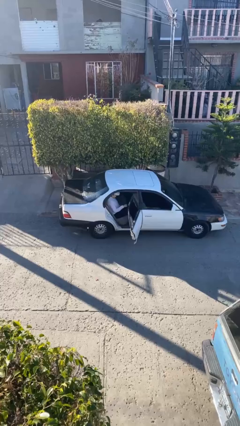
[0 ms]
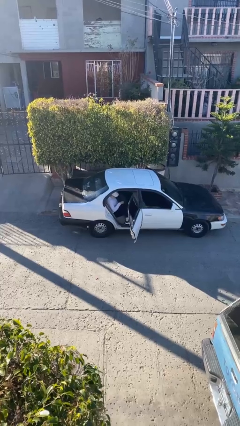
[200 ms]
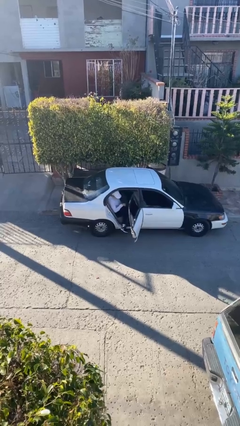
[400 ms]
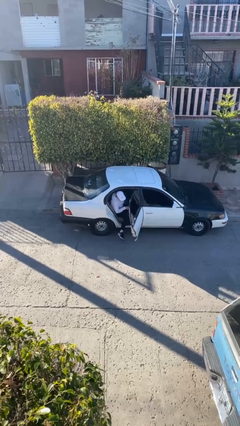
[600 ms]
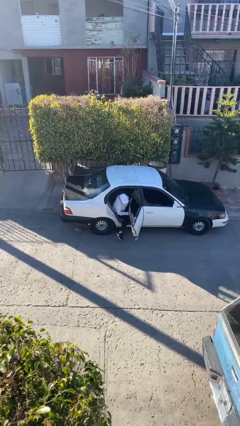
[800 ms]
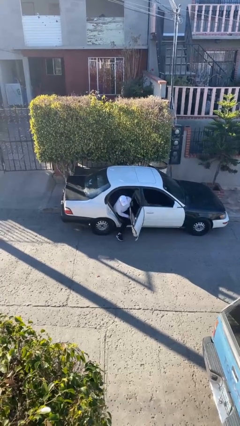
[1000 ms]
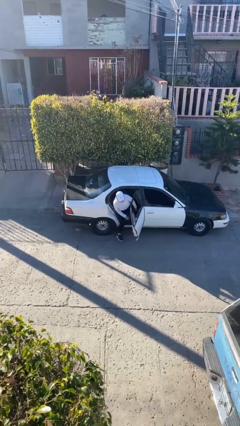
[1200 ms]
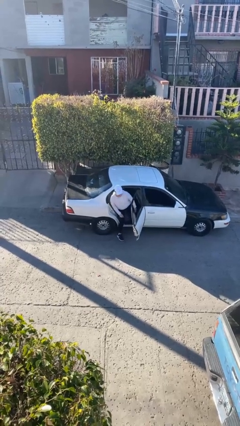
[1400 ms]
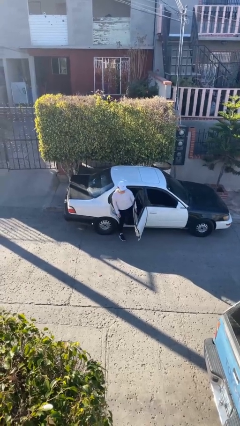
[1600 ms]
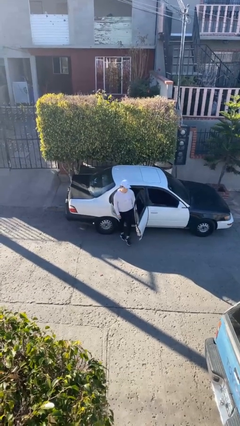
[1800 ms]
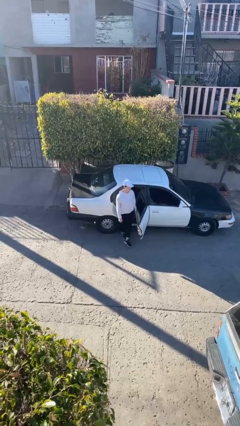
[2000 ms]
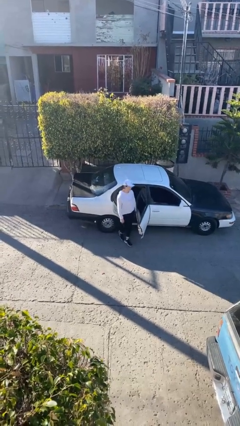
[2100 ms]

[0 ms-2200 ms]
person exits car

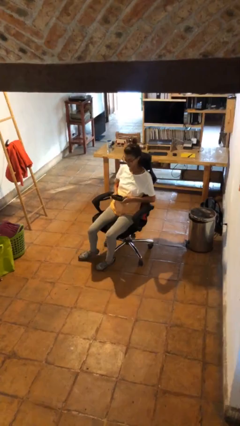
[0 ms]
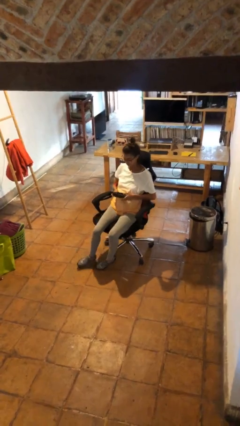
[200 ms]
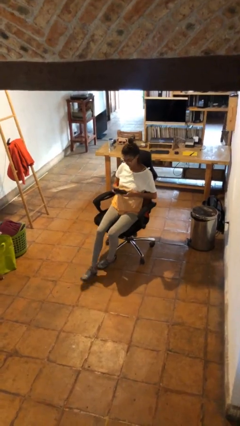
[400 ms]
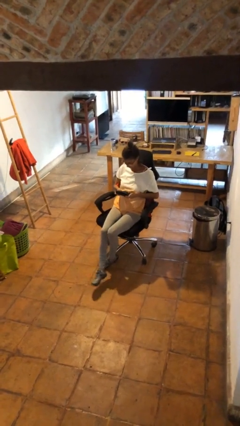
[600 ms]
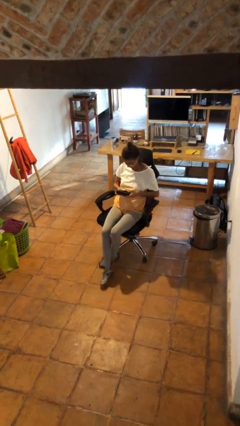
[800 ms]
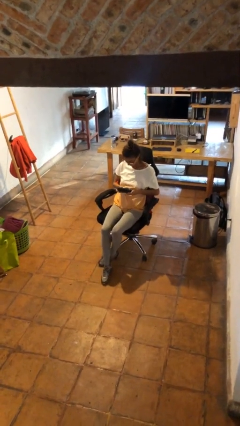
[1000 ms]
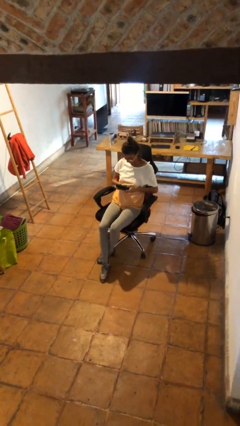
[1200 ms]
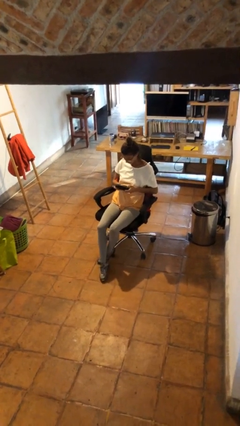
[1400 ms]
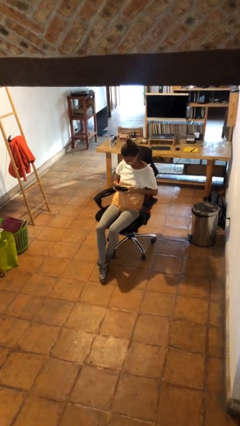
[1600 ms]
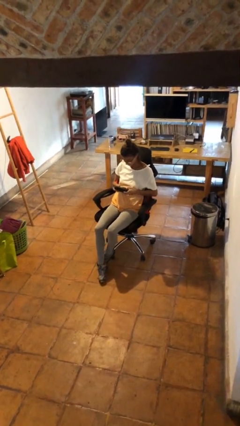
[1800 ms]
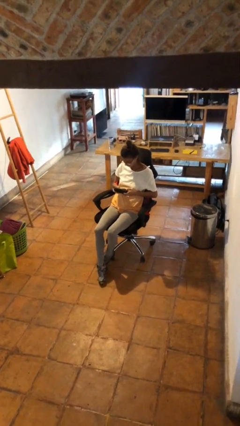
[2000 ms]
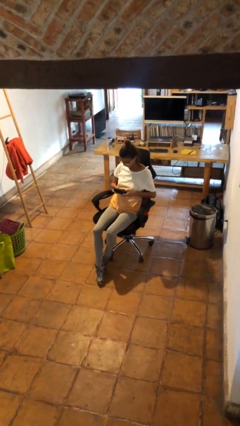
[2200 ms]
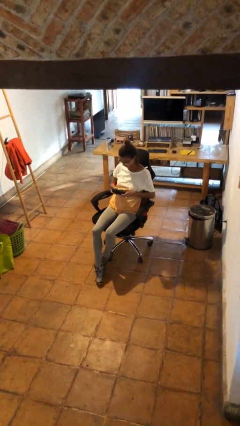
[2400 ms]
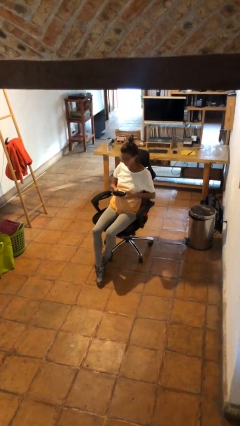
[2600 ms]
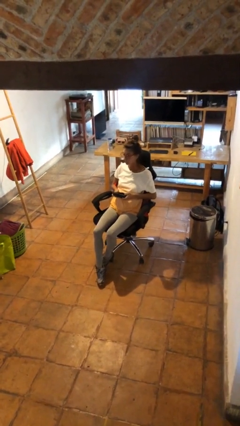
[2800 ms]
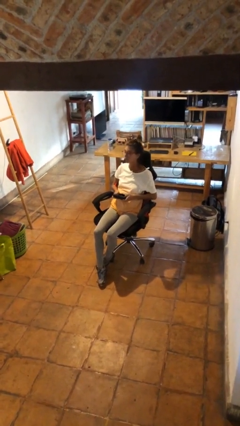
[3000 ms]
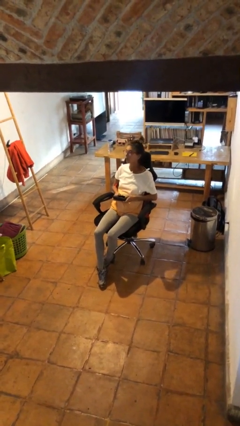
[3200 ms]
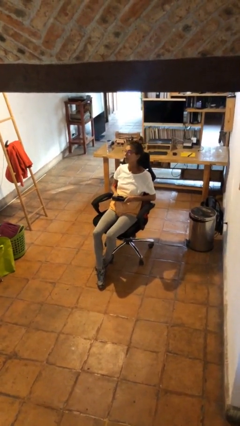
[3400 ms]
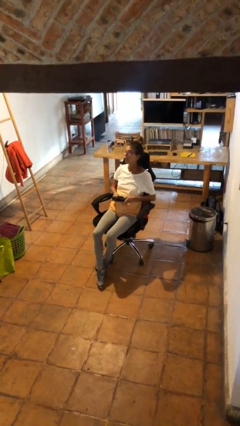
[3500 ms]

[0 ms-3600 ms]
person interacts with handheld game

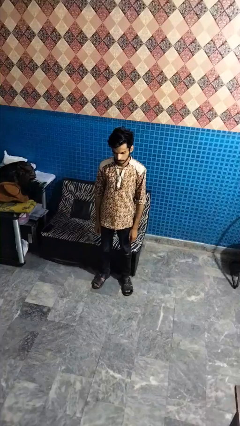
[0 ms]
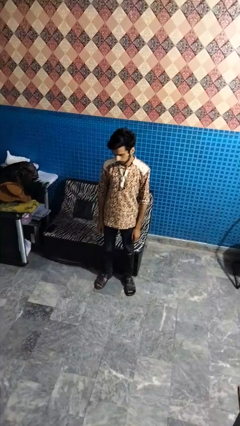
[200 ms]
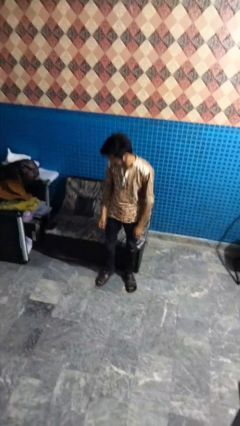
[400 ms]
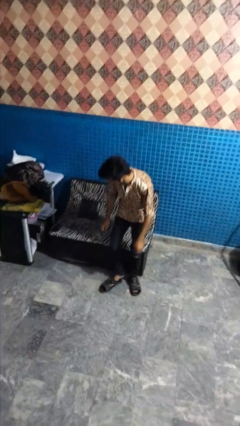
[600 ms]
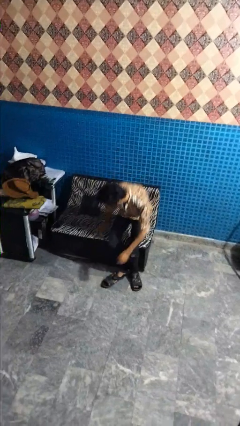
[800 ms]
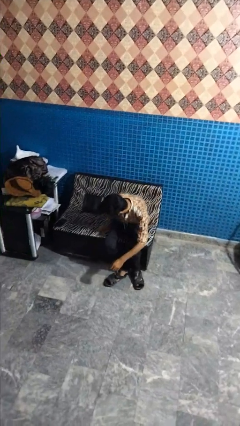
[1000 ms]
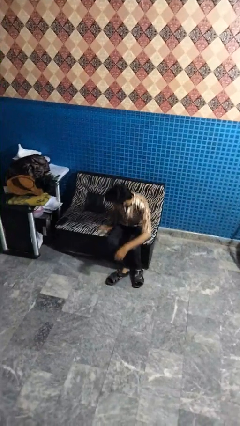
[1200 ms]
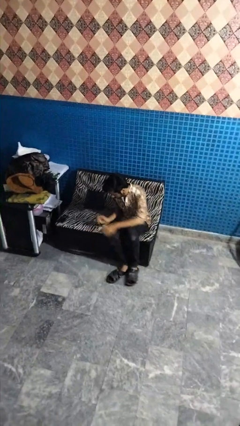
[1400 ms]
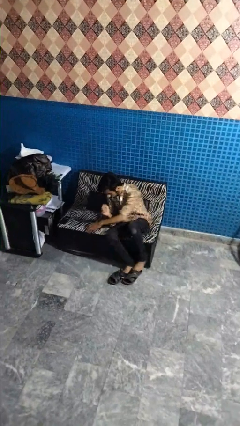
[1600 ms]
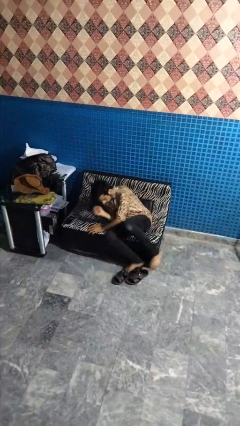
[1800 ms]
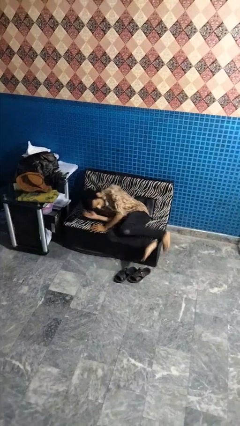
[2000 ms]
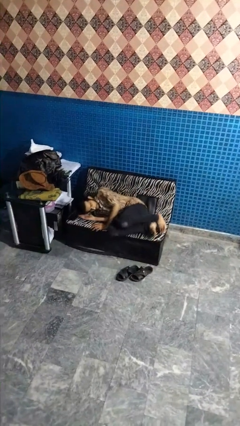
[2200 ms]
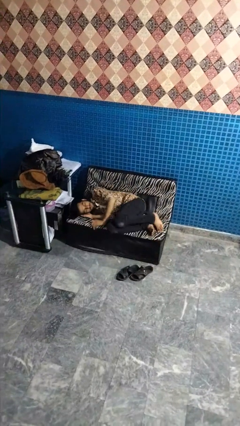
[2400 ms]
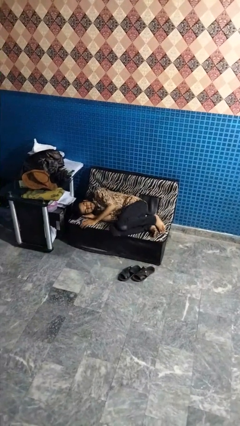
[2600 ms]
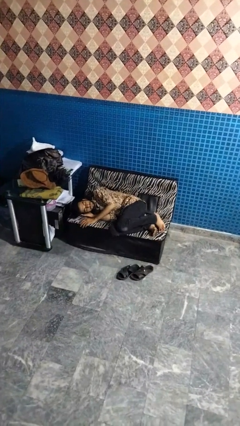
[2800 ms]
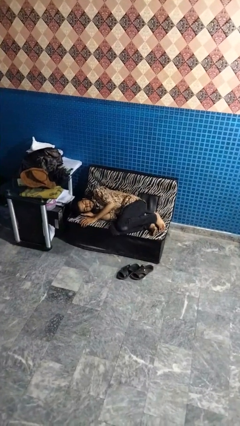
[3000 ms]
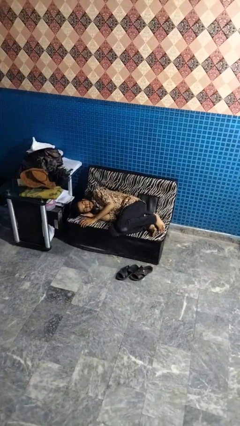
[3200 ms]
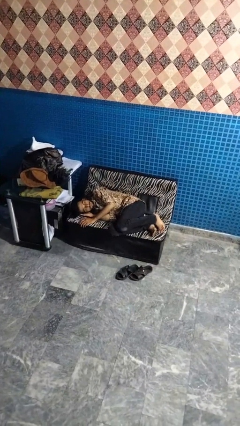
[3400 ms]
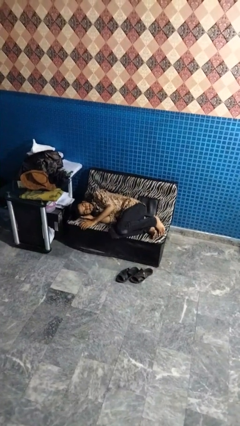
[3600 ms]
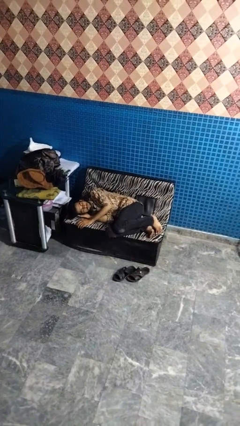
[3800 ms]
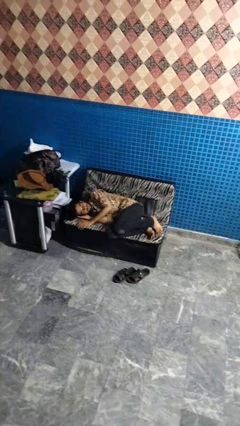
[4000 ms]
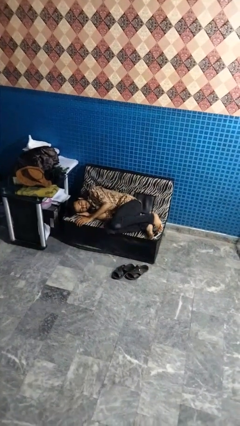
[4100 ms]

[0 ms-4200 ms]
person lies down on couch

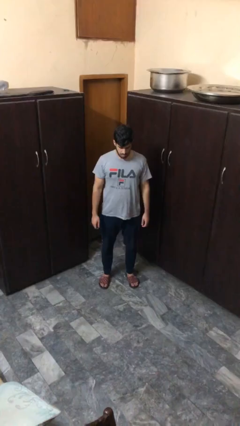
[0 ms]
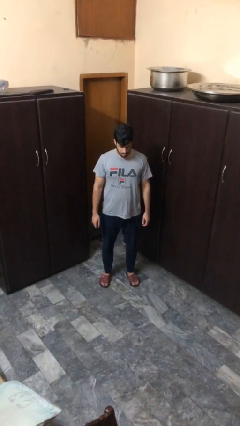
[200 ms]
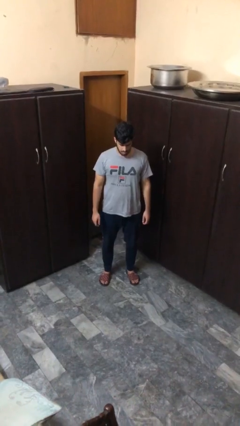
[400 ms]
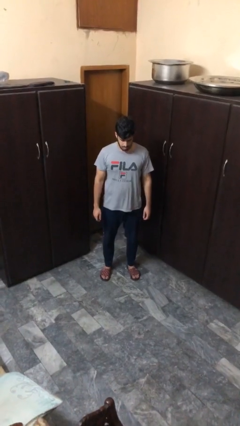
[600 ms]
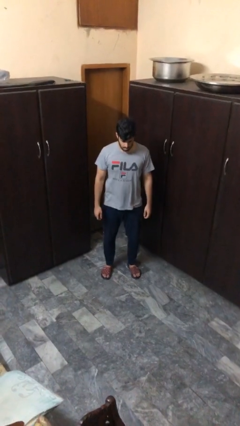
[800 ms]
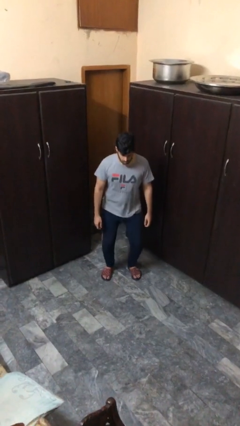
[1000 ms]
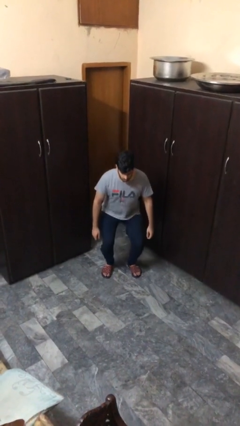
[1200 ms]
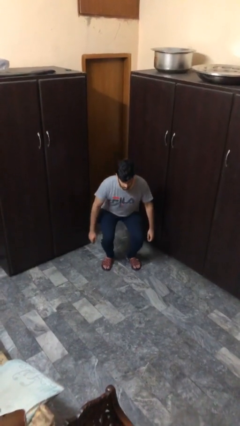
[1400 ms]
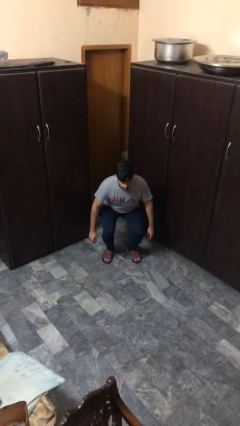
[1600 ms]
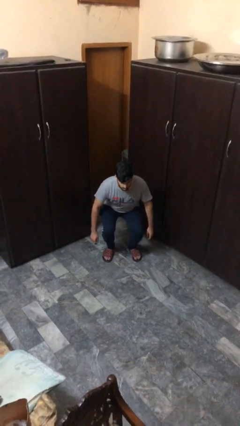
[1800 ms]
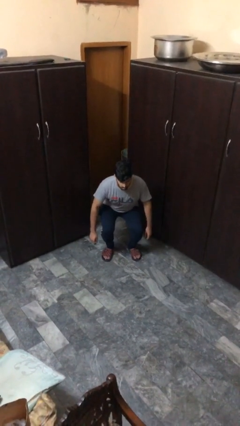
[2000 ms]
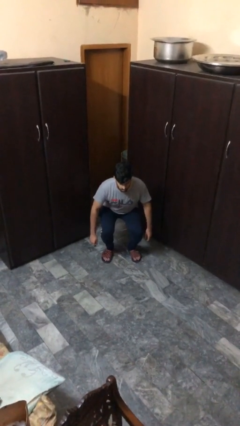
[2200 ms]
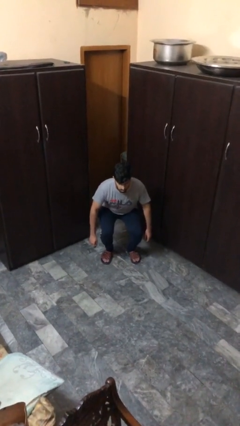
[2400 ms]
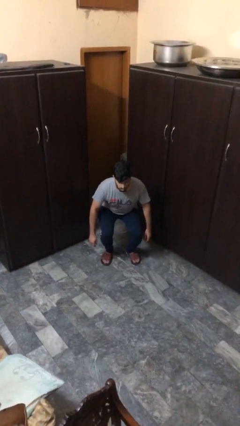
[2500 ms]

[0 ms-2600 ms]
person squats

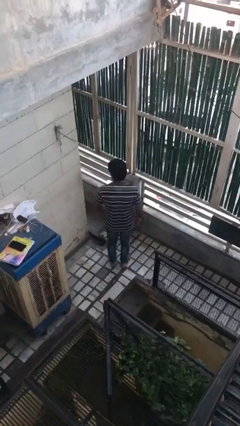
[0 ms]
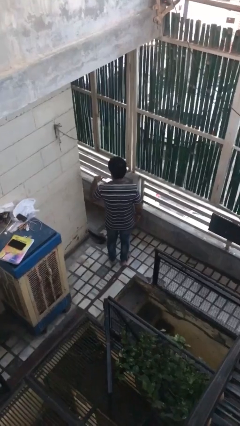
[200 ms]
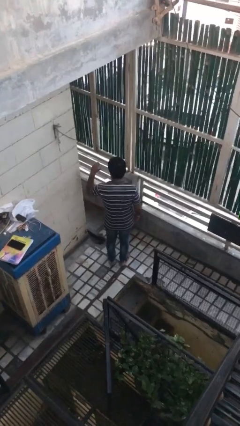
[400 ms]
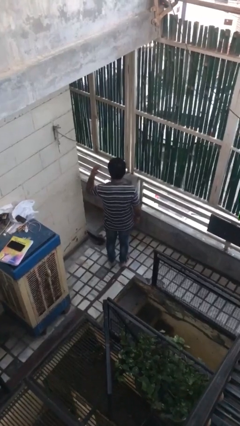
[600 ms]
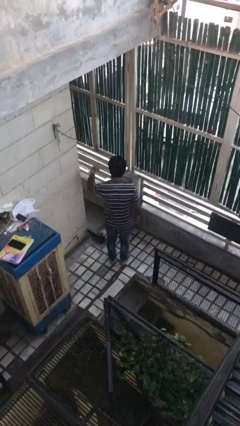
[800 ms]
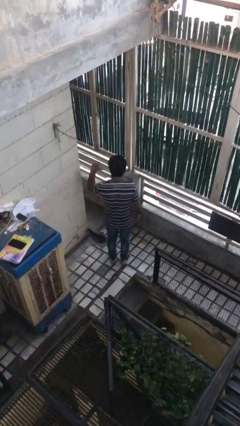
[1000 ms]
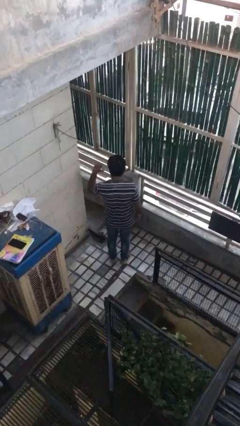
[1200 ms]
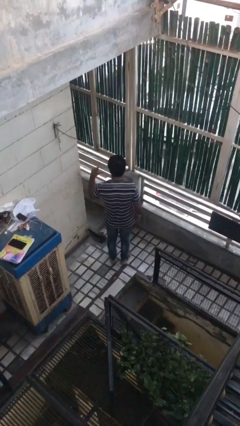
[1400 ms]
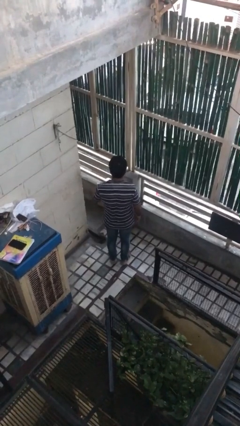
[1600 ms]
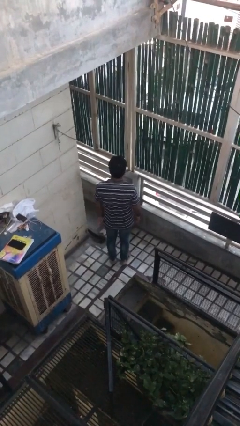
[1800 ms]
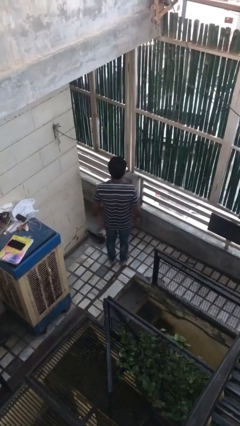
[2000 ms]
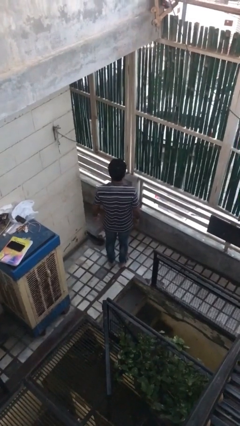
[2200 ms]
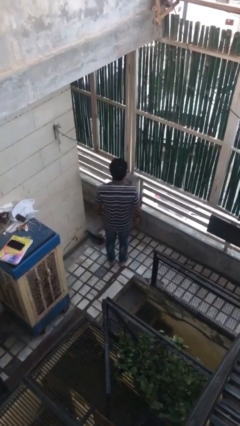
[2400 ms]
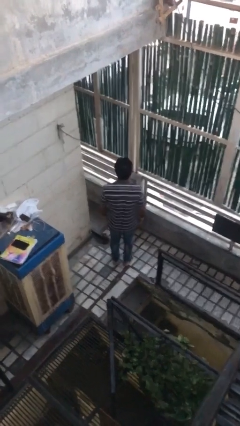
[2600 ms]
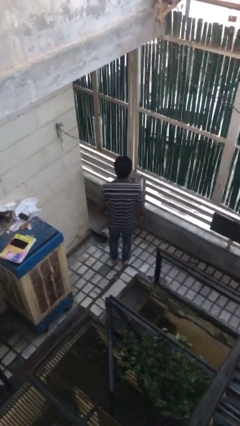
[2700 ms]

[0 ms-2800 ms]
person gestures behind me

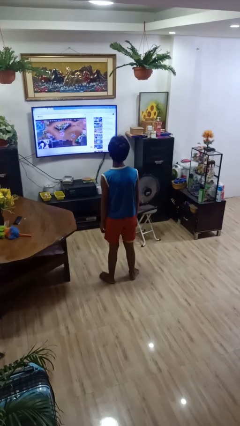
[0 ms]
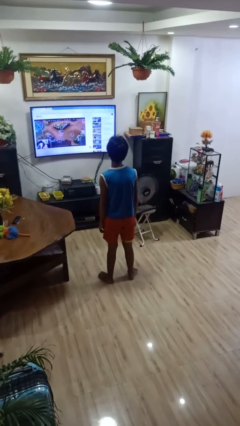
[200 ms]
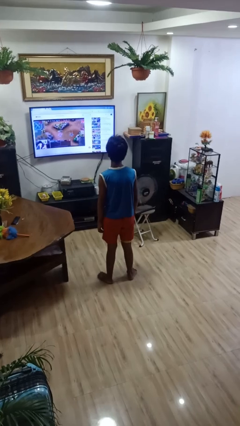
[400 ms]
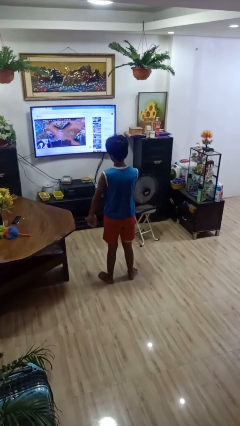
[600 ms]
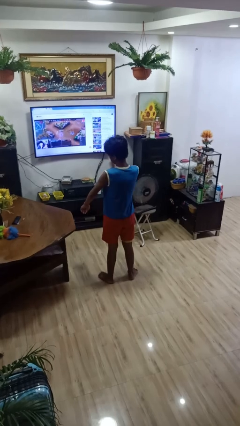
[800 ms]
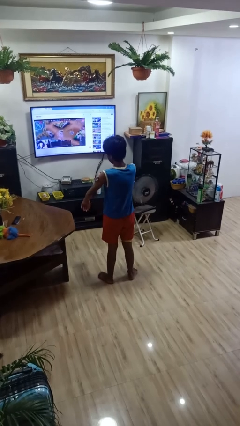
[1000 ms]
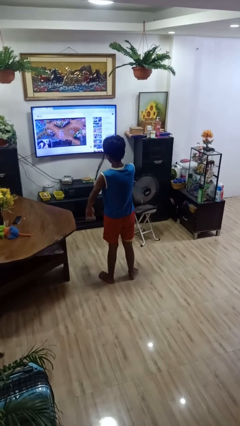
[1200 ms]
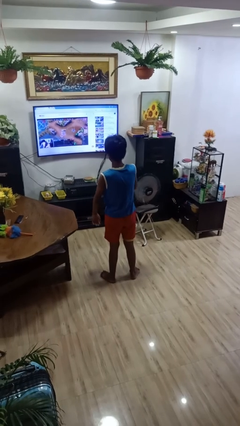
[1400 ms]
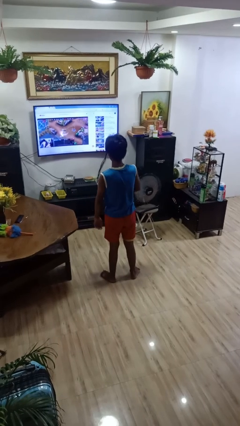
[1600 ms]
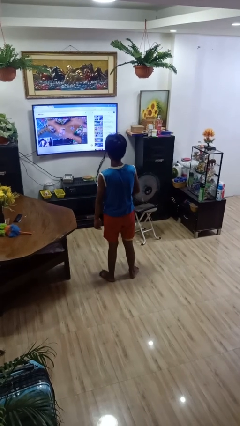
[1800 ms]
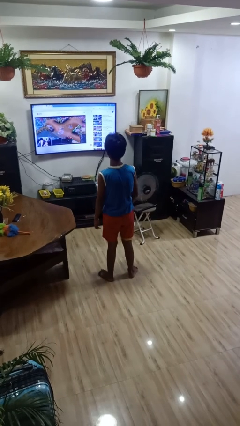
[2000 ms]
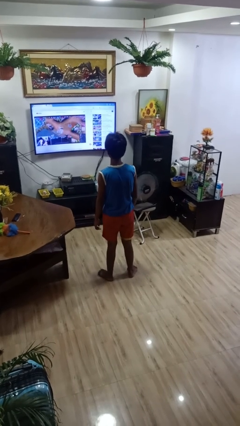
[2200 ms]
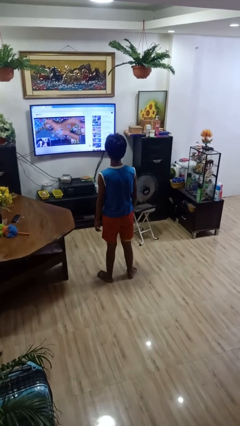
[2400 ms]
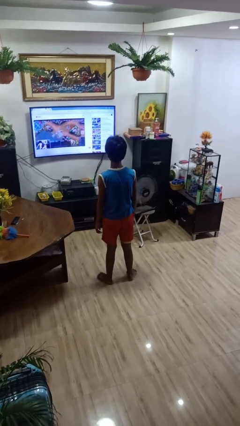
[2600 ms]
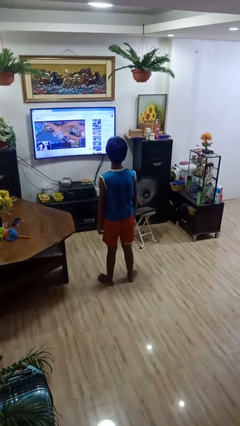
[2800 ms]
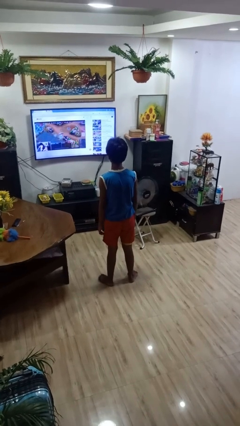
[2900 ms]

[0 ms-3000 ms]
person swats bug
